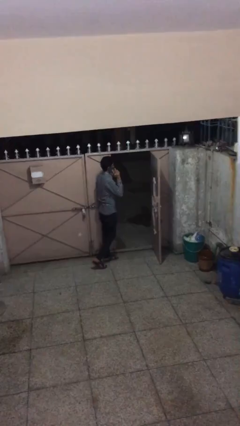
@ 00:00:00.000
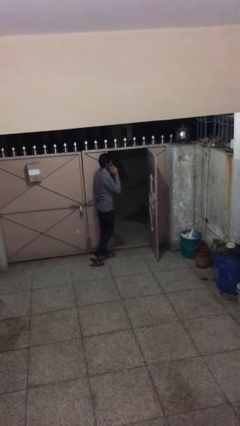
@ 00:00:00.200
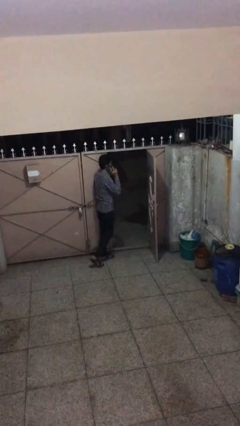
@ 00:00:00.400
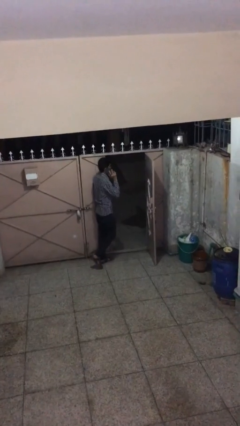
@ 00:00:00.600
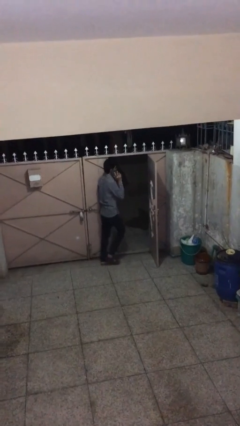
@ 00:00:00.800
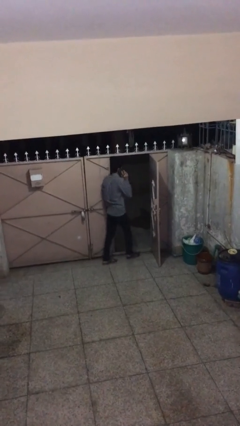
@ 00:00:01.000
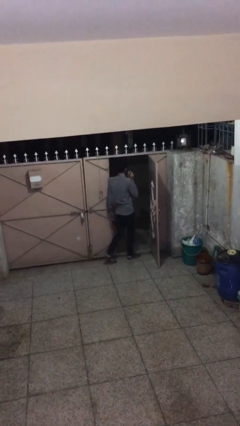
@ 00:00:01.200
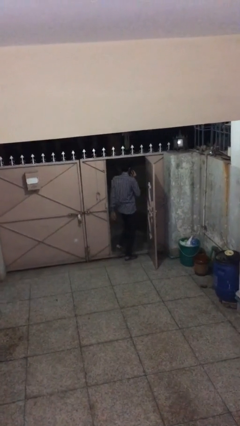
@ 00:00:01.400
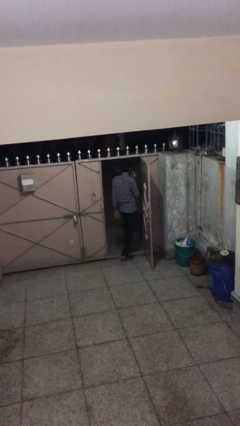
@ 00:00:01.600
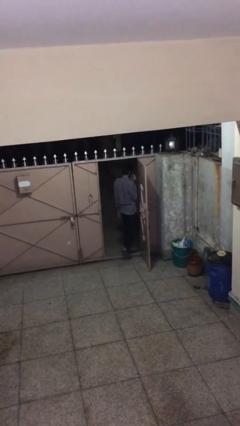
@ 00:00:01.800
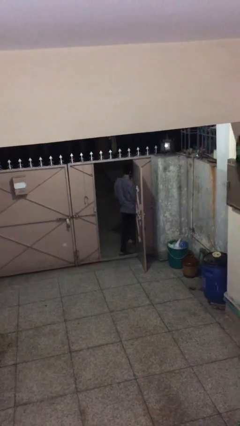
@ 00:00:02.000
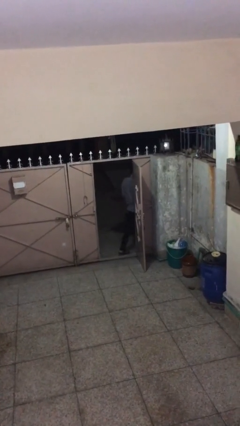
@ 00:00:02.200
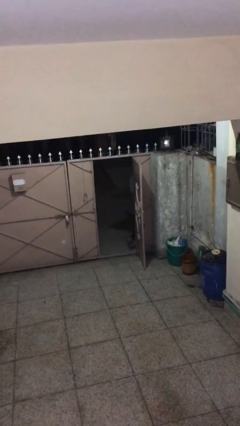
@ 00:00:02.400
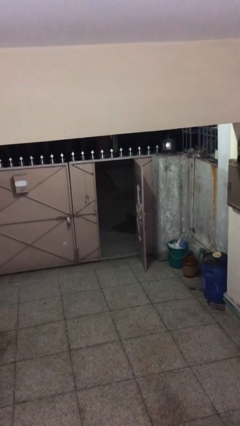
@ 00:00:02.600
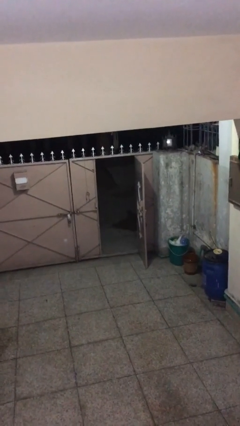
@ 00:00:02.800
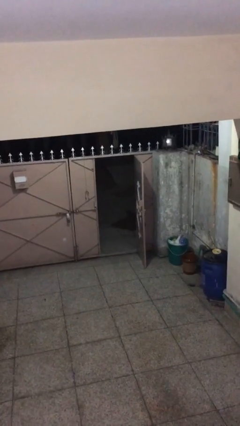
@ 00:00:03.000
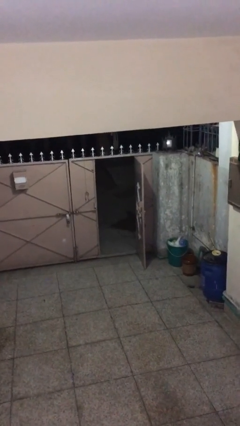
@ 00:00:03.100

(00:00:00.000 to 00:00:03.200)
person exits scene through structure

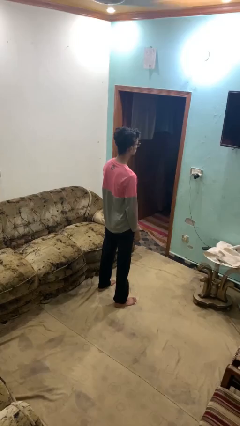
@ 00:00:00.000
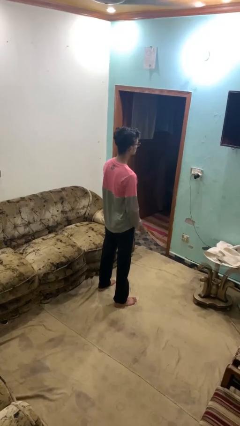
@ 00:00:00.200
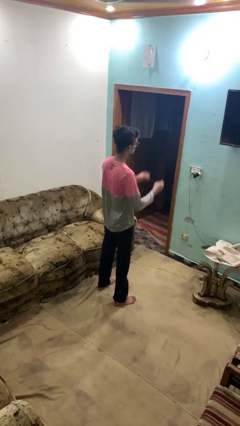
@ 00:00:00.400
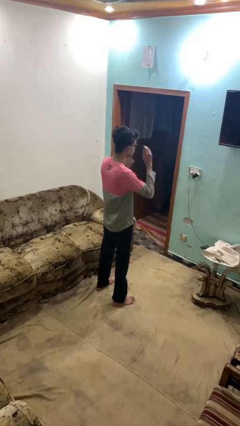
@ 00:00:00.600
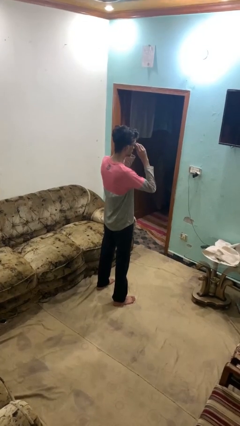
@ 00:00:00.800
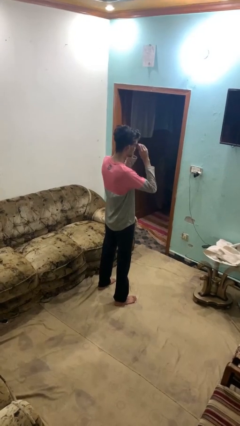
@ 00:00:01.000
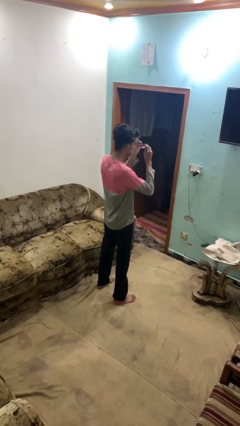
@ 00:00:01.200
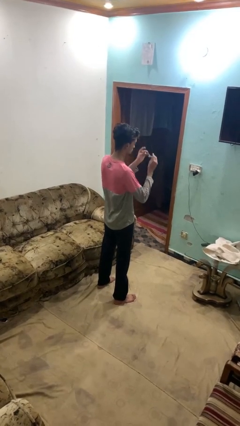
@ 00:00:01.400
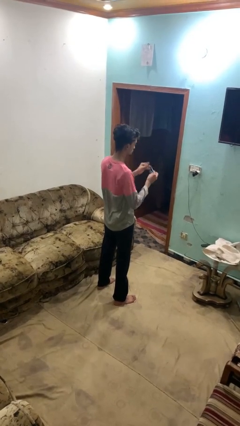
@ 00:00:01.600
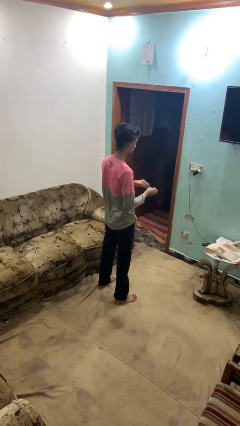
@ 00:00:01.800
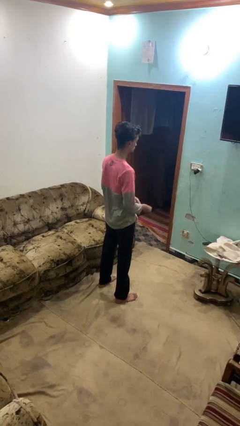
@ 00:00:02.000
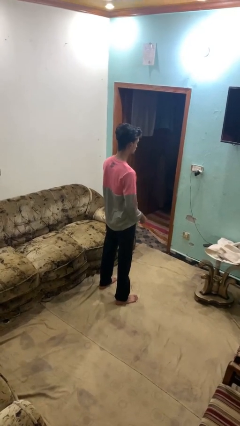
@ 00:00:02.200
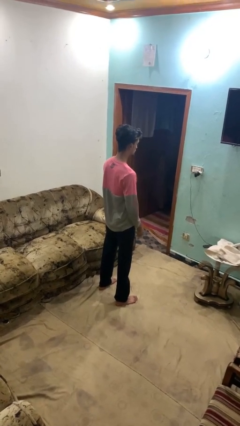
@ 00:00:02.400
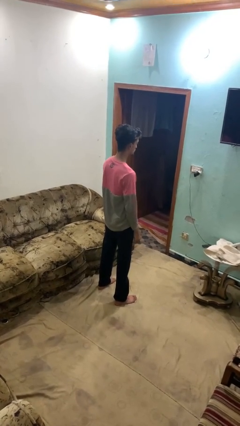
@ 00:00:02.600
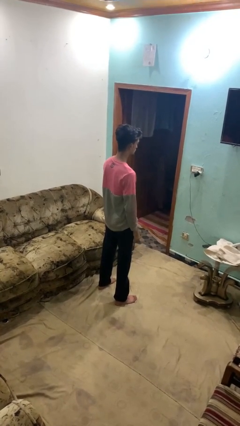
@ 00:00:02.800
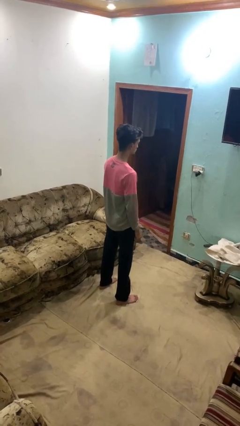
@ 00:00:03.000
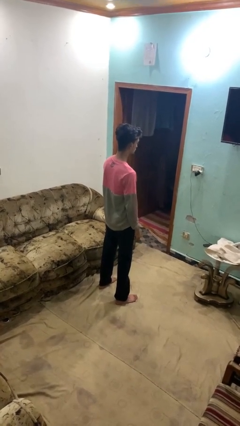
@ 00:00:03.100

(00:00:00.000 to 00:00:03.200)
person takes off glasses

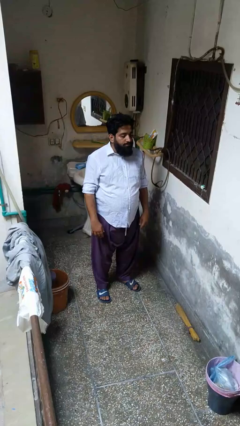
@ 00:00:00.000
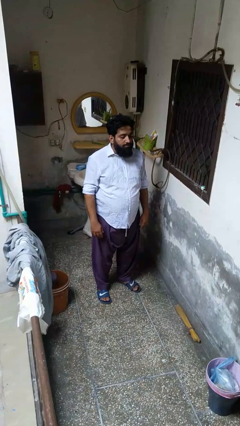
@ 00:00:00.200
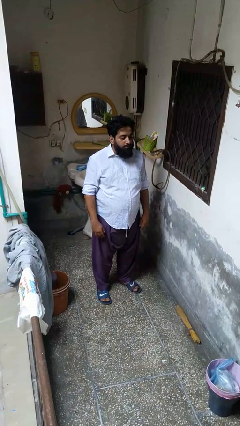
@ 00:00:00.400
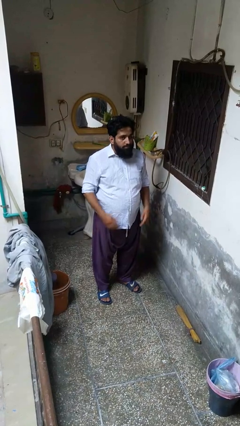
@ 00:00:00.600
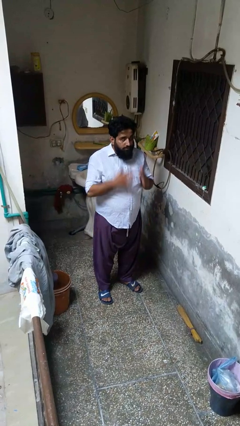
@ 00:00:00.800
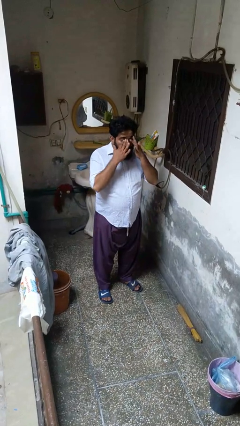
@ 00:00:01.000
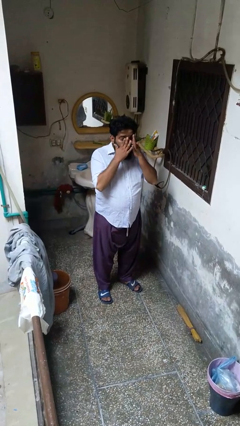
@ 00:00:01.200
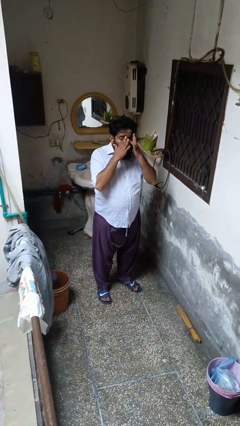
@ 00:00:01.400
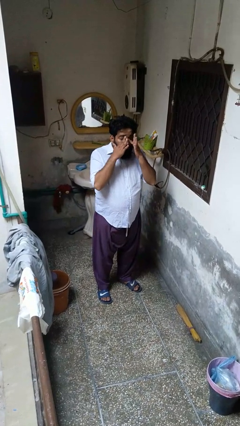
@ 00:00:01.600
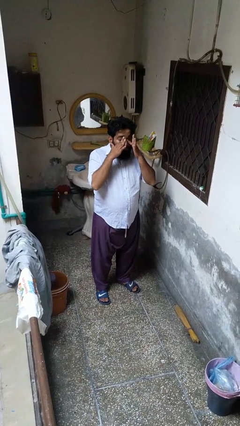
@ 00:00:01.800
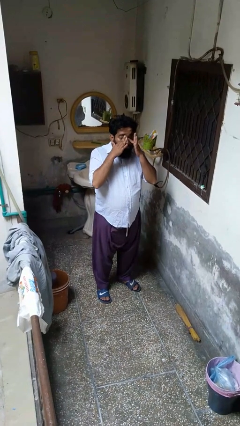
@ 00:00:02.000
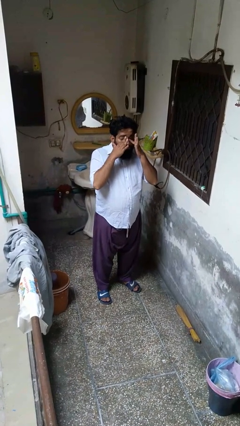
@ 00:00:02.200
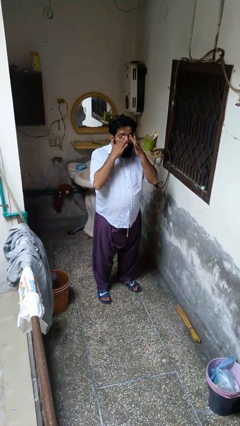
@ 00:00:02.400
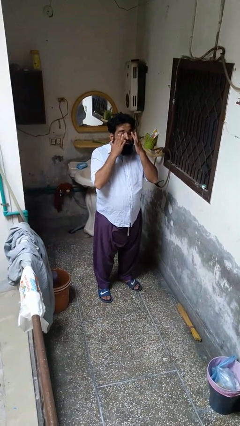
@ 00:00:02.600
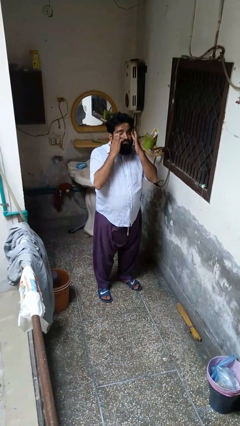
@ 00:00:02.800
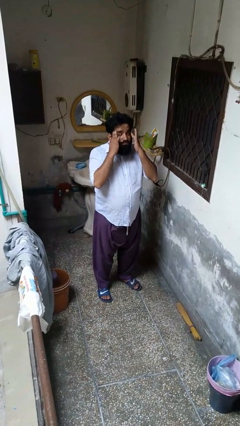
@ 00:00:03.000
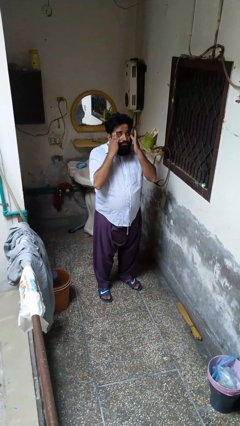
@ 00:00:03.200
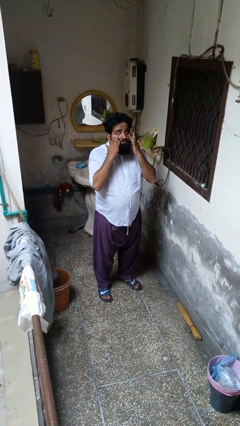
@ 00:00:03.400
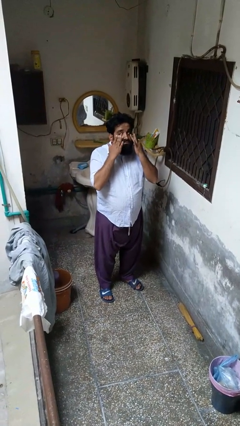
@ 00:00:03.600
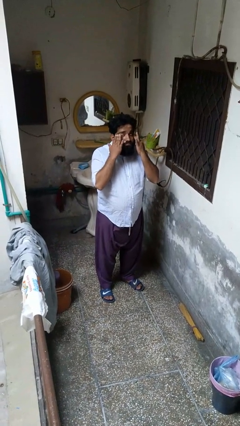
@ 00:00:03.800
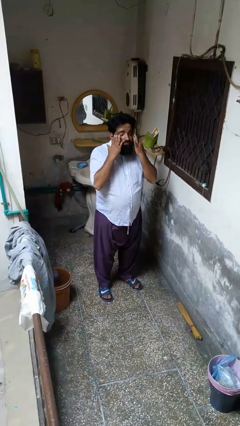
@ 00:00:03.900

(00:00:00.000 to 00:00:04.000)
person rubs eyes

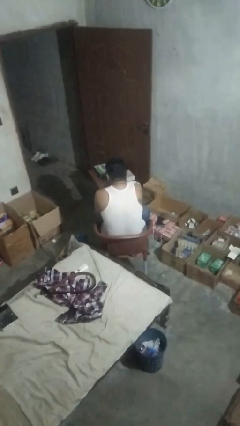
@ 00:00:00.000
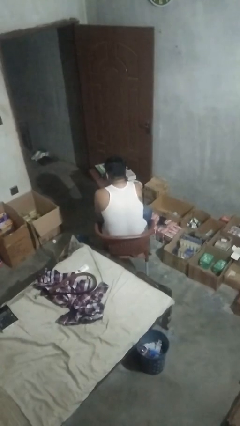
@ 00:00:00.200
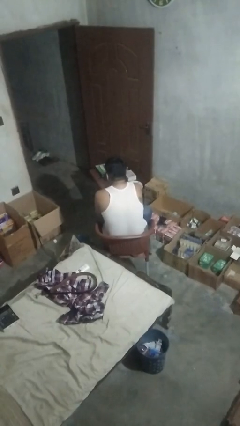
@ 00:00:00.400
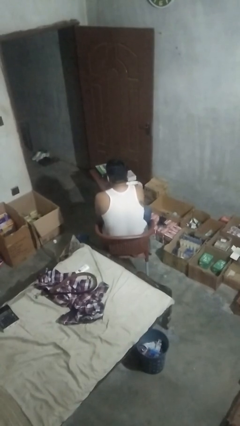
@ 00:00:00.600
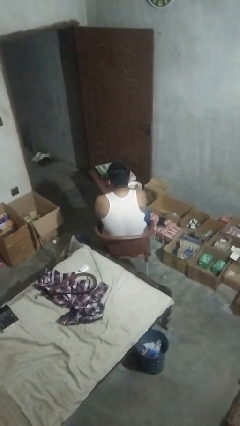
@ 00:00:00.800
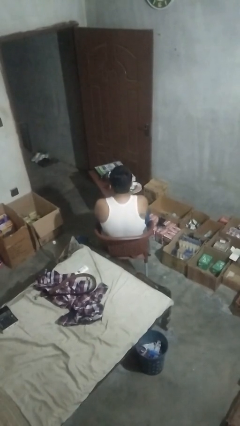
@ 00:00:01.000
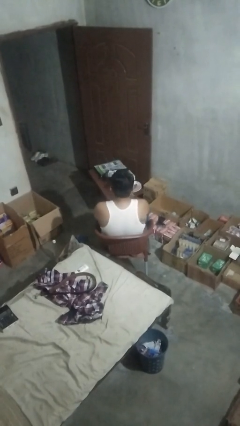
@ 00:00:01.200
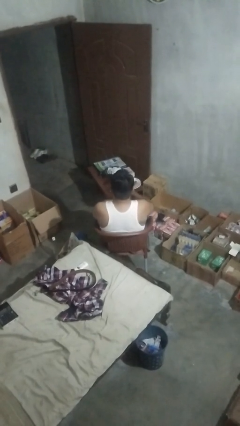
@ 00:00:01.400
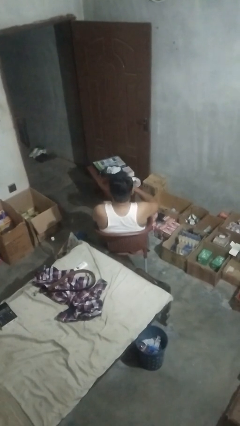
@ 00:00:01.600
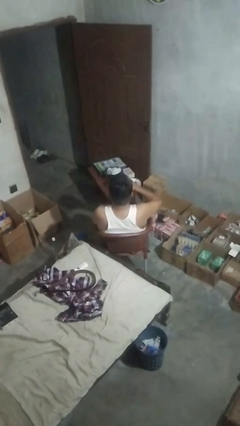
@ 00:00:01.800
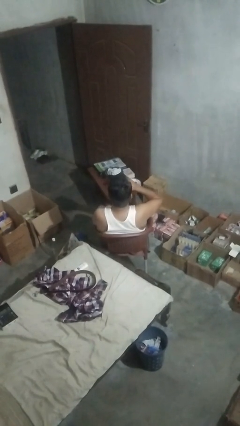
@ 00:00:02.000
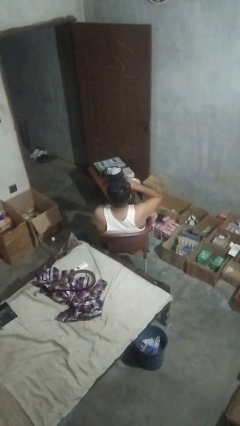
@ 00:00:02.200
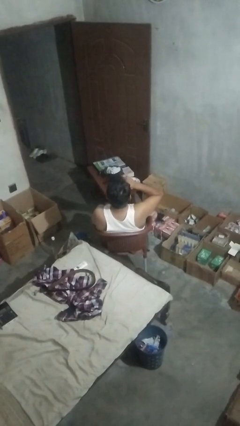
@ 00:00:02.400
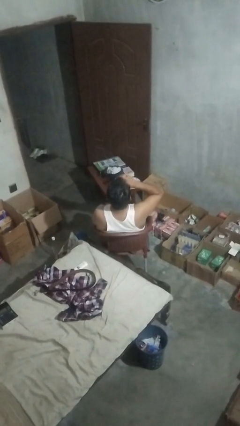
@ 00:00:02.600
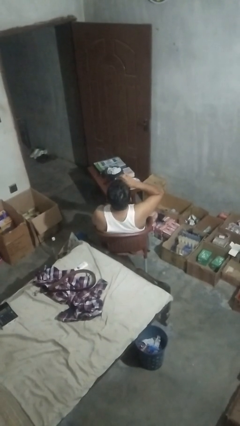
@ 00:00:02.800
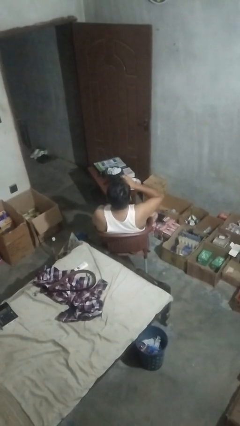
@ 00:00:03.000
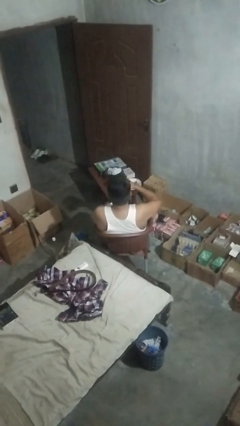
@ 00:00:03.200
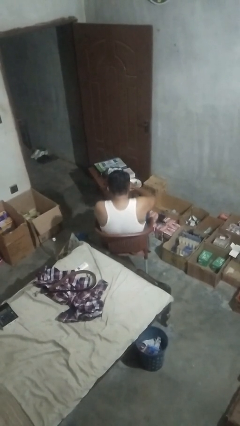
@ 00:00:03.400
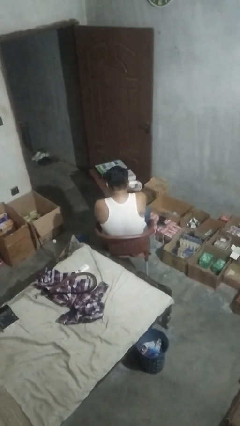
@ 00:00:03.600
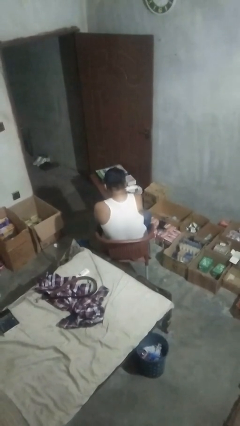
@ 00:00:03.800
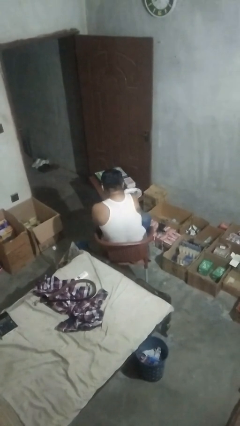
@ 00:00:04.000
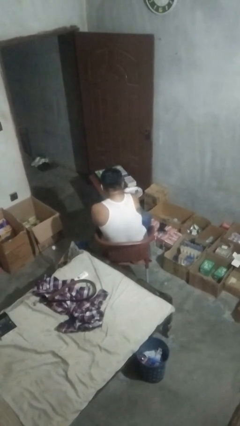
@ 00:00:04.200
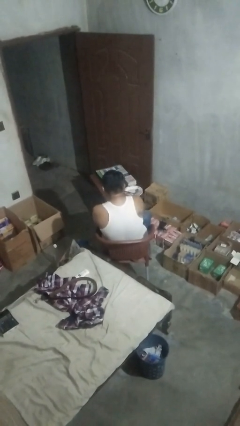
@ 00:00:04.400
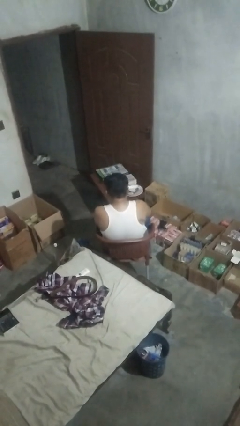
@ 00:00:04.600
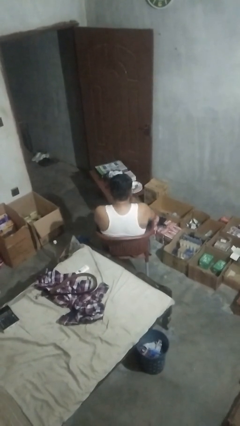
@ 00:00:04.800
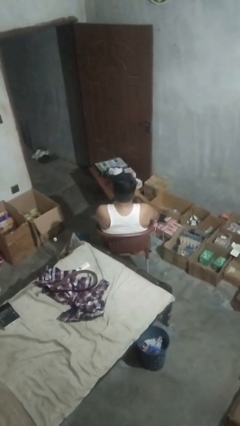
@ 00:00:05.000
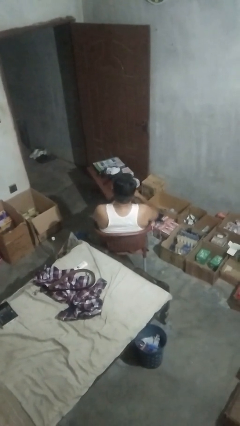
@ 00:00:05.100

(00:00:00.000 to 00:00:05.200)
person drinks from cup

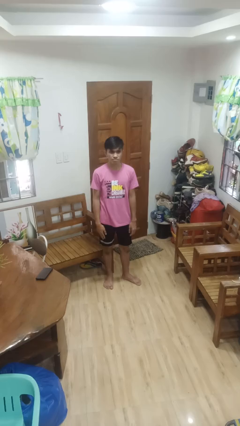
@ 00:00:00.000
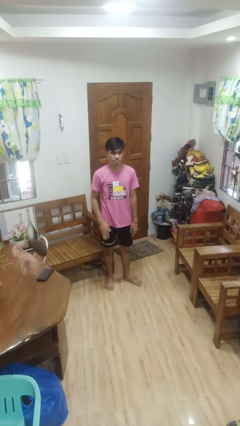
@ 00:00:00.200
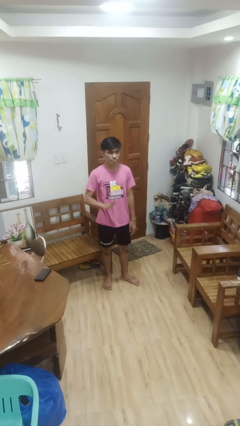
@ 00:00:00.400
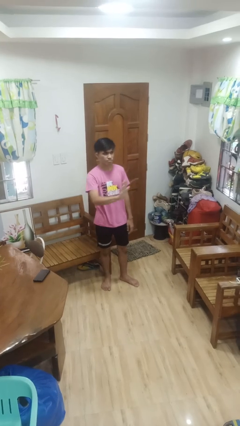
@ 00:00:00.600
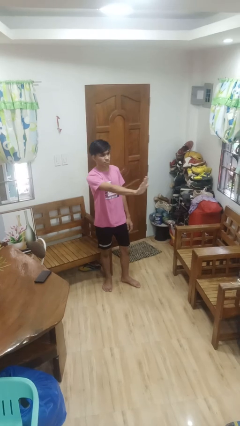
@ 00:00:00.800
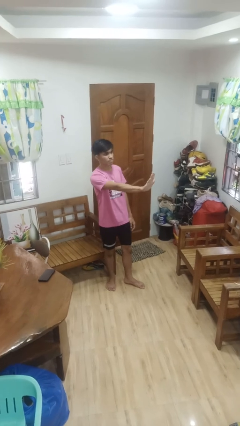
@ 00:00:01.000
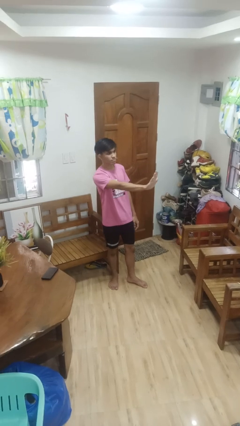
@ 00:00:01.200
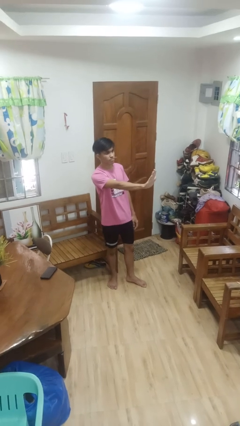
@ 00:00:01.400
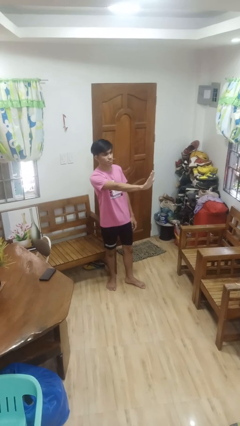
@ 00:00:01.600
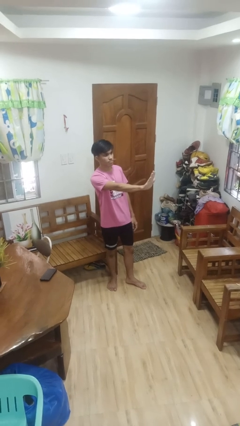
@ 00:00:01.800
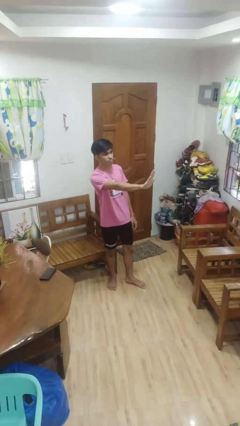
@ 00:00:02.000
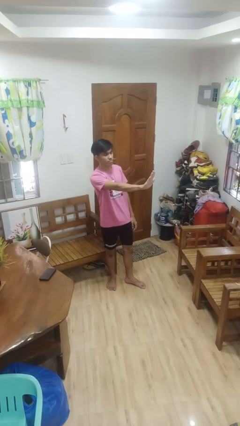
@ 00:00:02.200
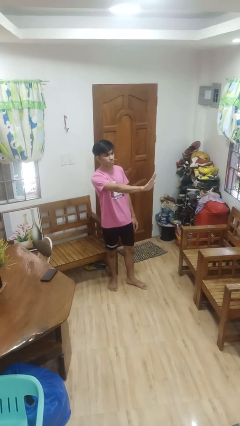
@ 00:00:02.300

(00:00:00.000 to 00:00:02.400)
person gestures stop
